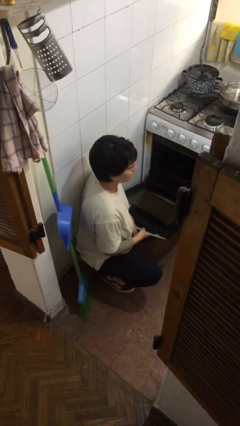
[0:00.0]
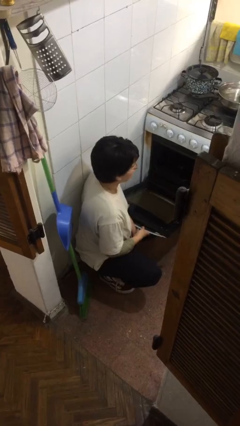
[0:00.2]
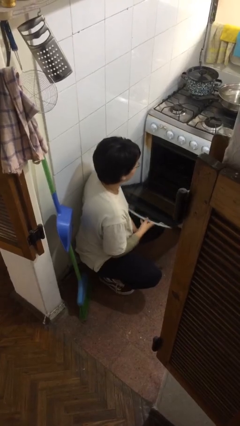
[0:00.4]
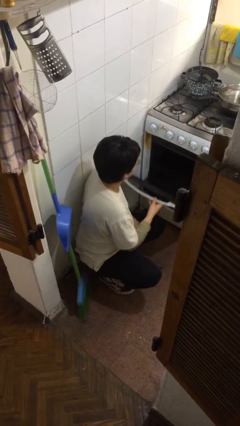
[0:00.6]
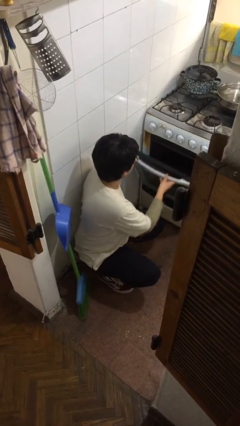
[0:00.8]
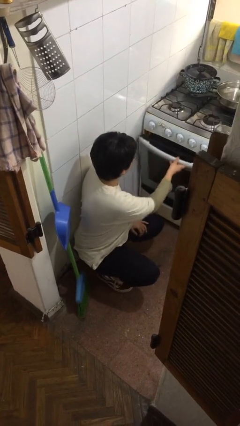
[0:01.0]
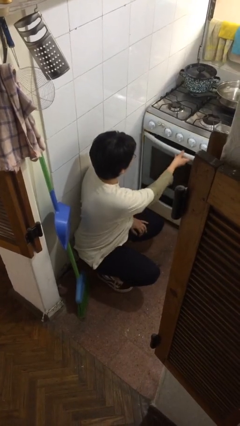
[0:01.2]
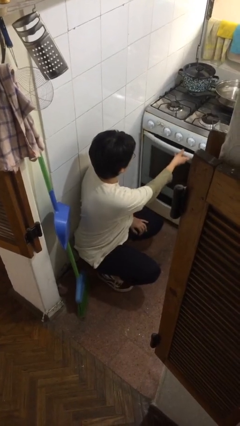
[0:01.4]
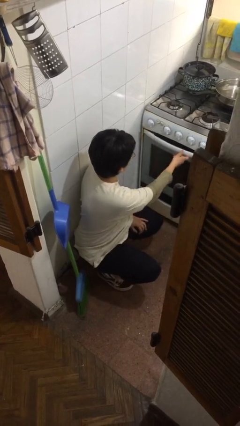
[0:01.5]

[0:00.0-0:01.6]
person closes oven door

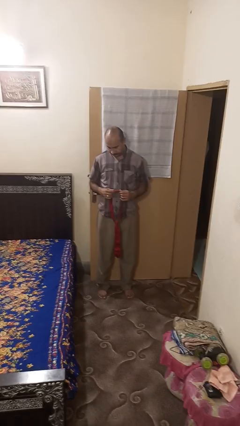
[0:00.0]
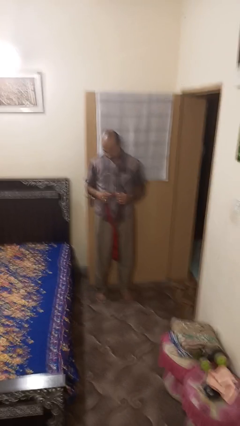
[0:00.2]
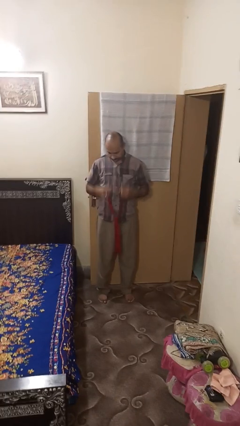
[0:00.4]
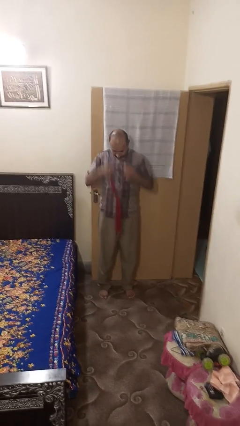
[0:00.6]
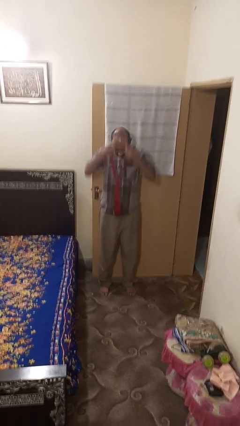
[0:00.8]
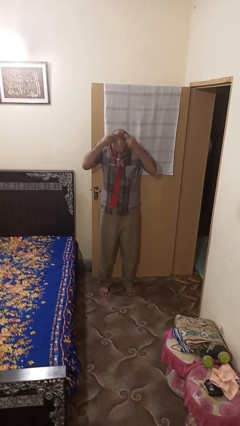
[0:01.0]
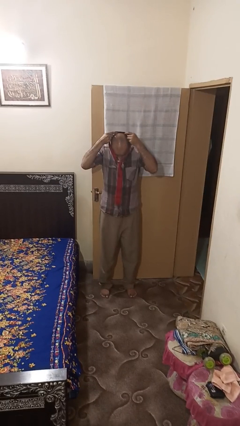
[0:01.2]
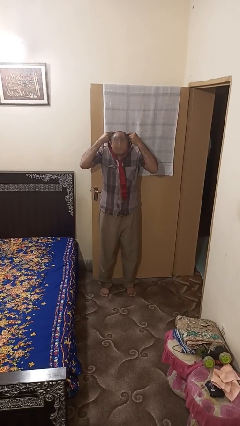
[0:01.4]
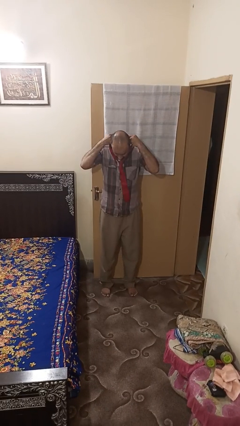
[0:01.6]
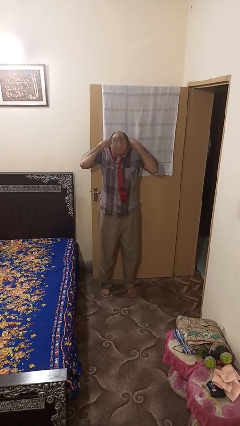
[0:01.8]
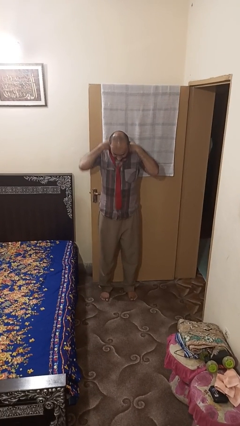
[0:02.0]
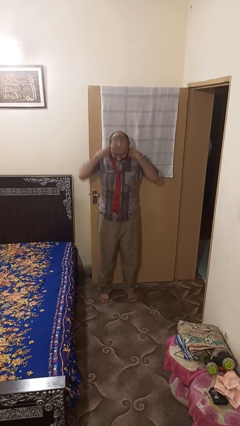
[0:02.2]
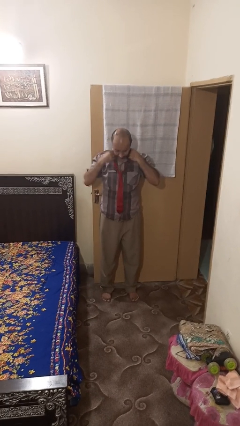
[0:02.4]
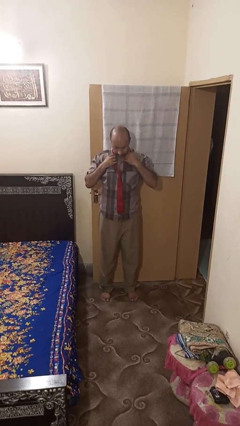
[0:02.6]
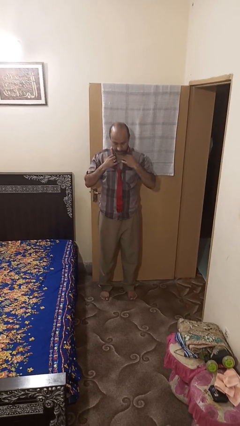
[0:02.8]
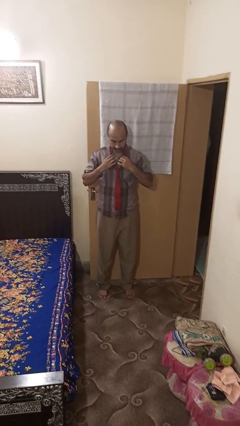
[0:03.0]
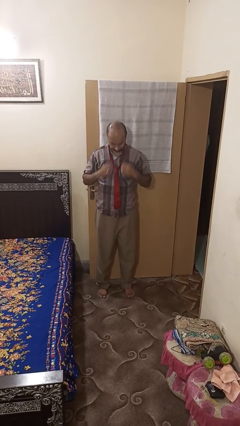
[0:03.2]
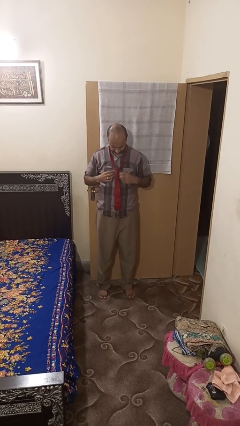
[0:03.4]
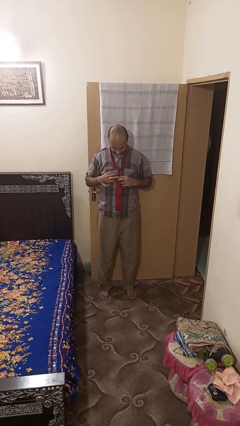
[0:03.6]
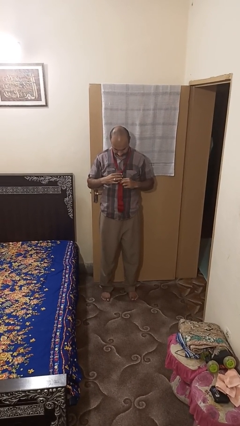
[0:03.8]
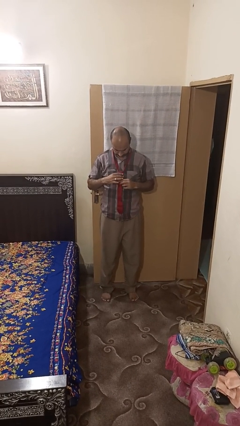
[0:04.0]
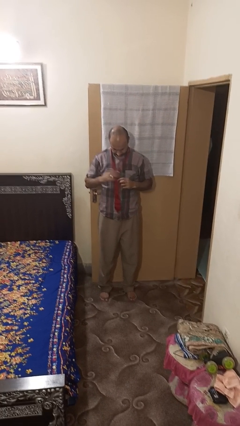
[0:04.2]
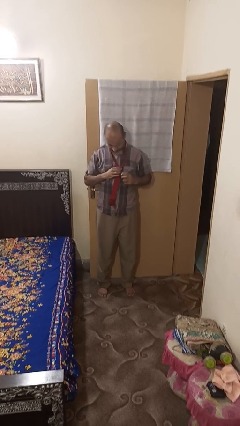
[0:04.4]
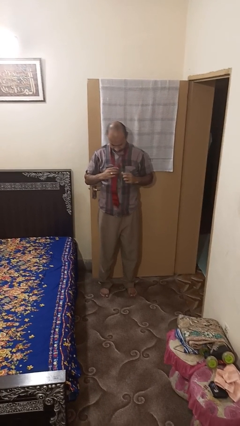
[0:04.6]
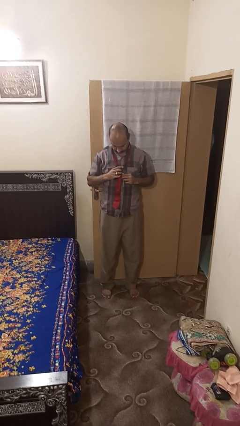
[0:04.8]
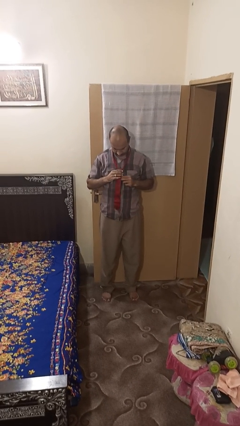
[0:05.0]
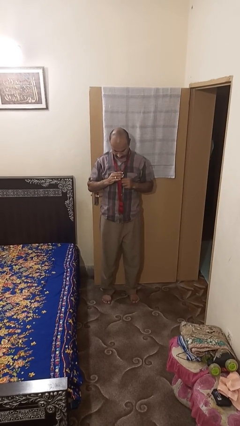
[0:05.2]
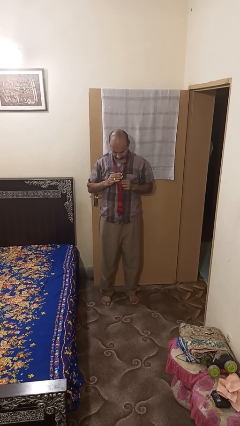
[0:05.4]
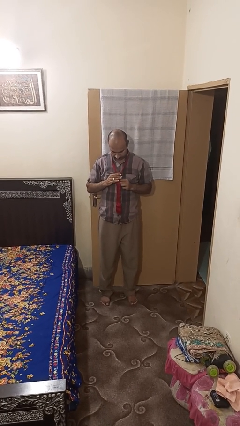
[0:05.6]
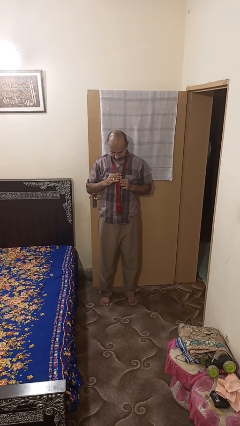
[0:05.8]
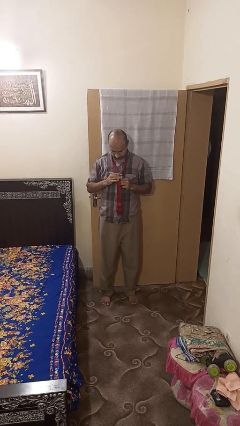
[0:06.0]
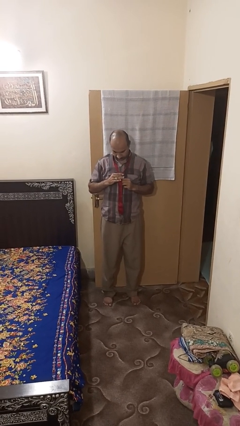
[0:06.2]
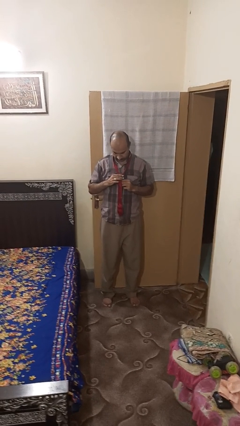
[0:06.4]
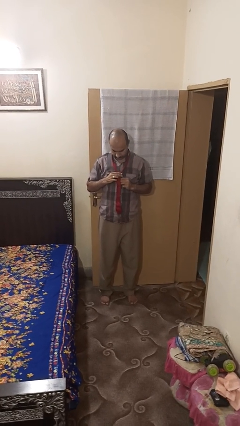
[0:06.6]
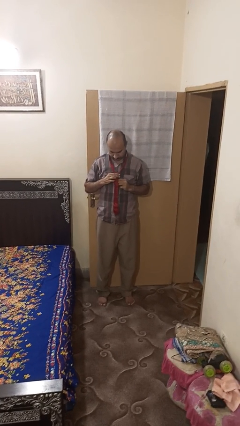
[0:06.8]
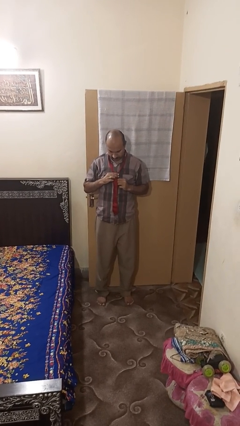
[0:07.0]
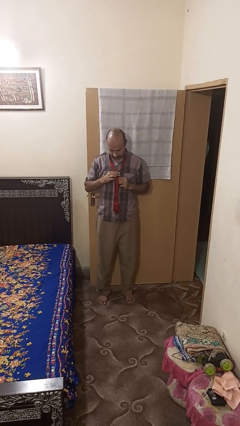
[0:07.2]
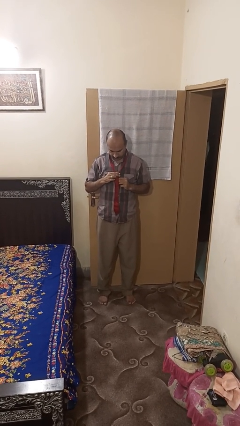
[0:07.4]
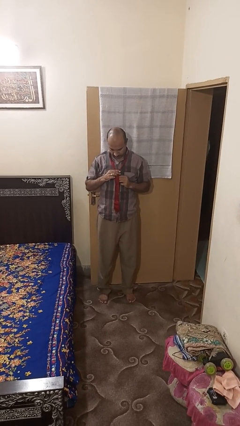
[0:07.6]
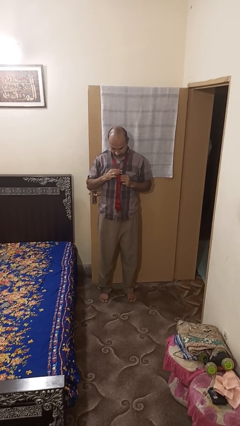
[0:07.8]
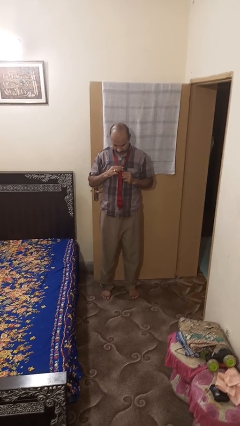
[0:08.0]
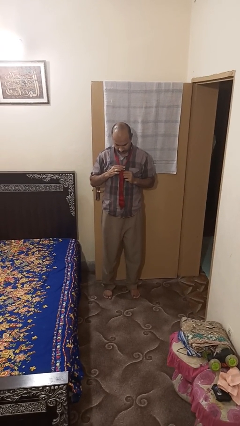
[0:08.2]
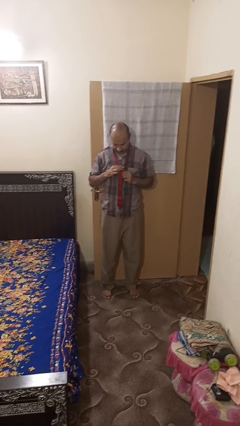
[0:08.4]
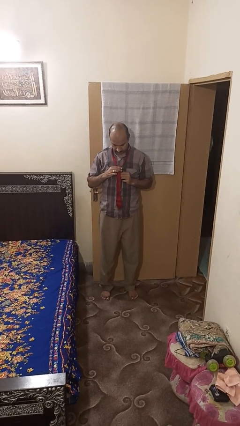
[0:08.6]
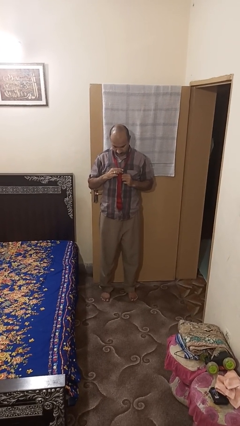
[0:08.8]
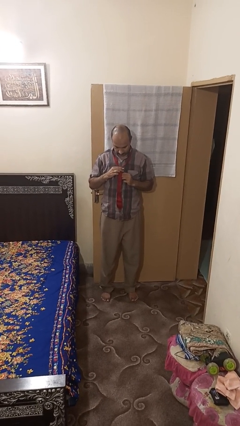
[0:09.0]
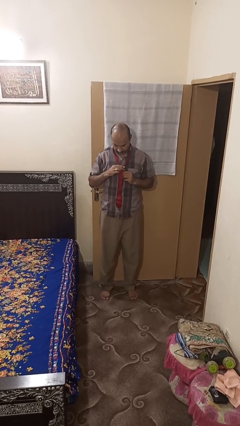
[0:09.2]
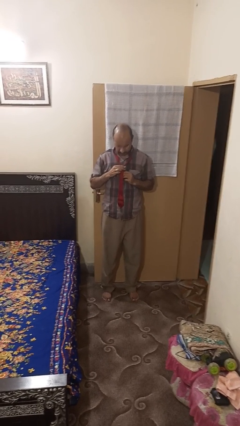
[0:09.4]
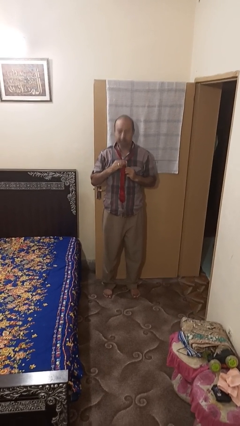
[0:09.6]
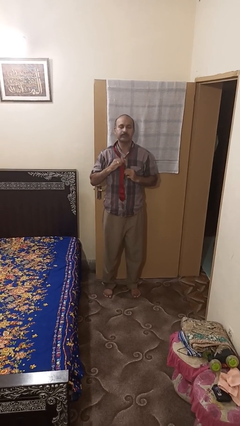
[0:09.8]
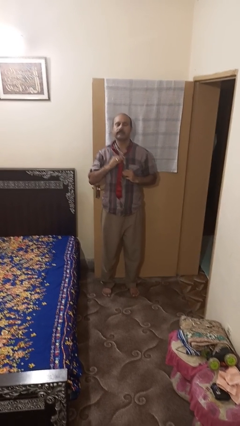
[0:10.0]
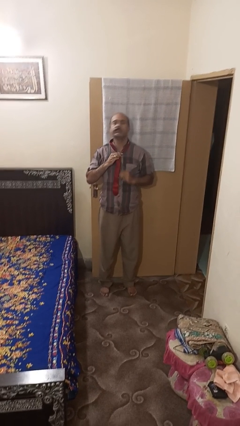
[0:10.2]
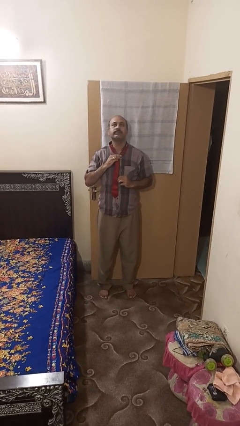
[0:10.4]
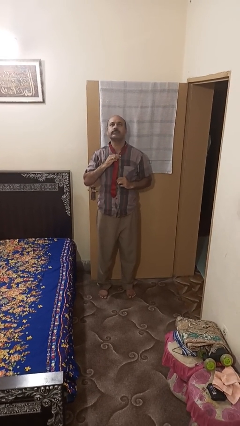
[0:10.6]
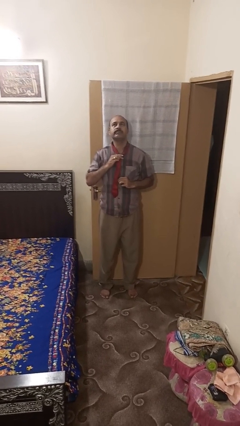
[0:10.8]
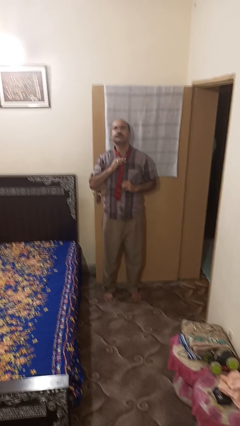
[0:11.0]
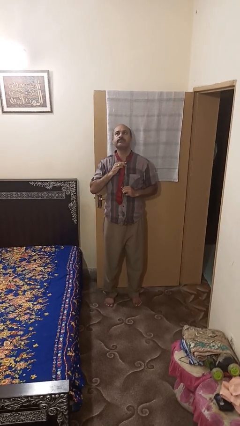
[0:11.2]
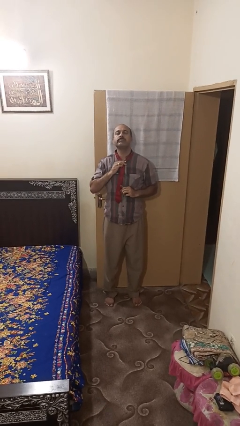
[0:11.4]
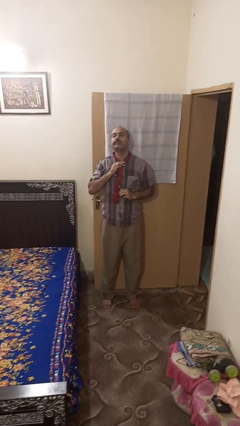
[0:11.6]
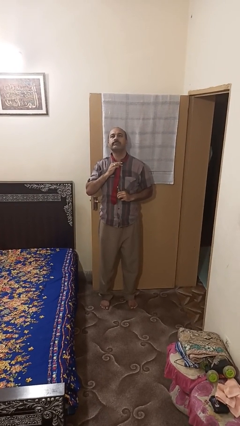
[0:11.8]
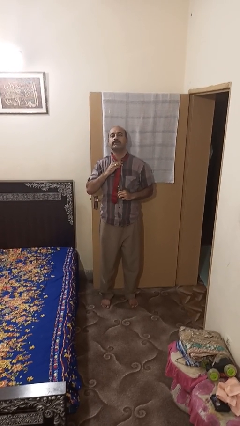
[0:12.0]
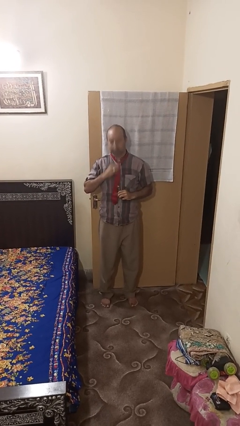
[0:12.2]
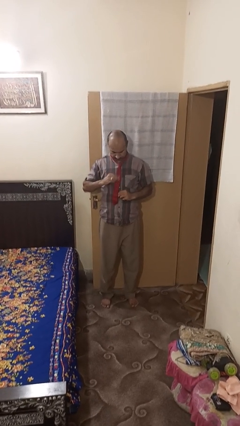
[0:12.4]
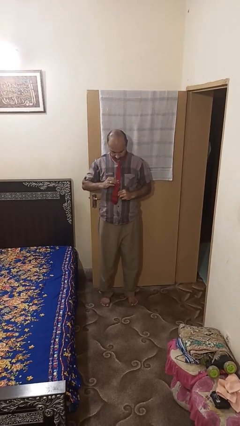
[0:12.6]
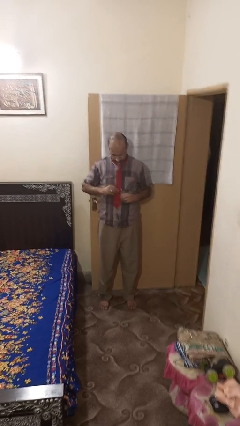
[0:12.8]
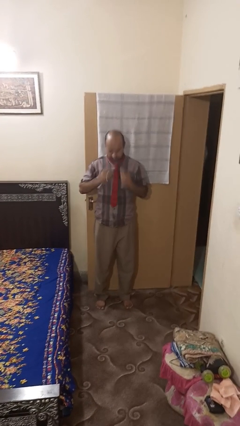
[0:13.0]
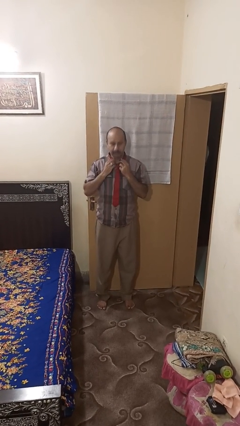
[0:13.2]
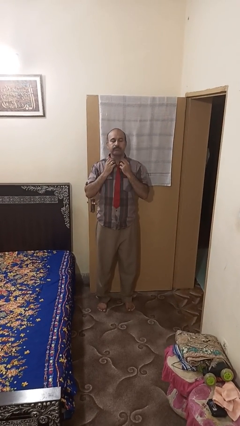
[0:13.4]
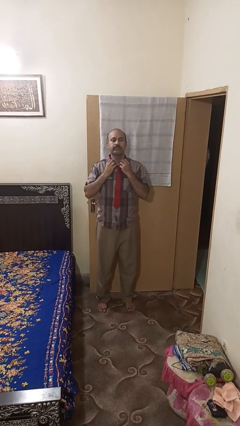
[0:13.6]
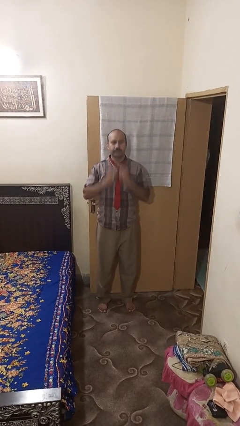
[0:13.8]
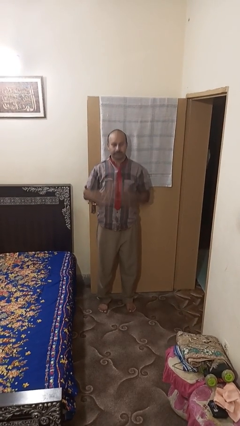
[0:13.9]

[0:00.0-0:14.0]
person puts on necktie

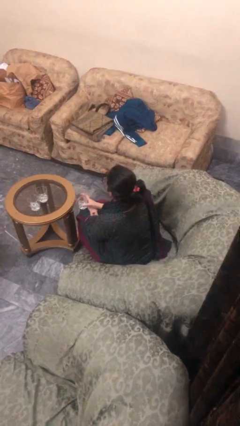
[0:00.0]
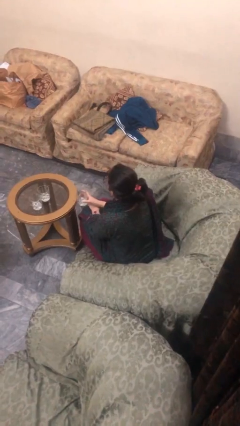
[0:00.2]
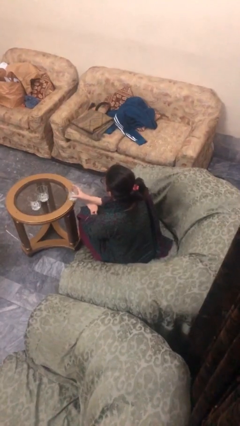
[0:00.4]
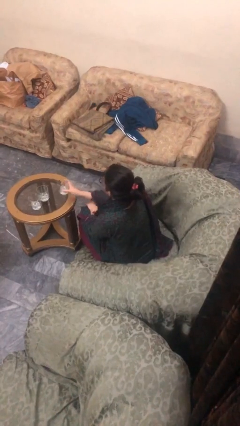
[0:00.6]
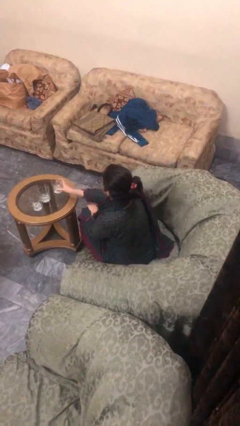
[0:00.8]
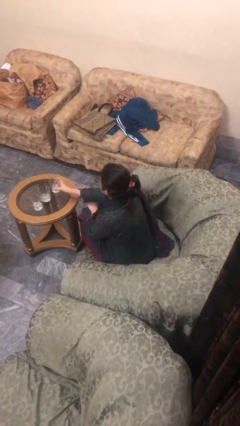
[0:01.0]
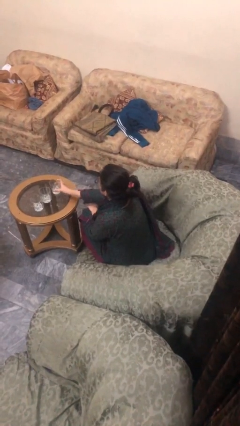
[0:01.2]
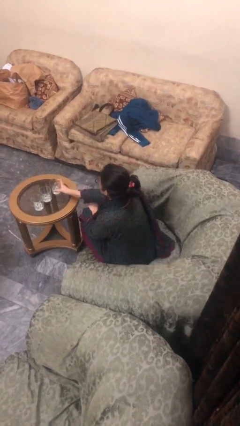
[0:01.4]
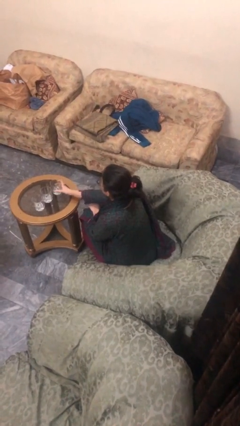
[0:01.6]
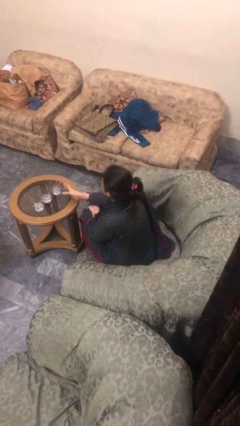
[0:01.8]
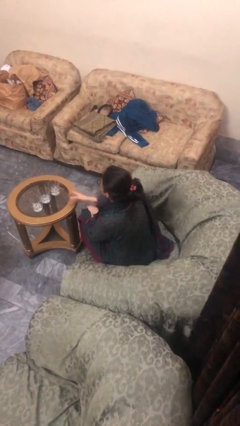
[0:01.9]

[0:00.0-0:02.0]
person puts down object on table

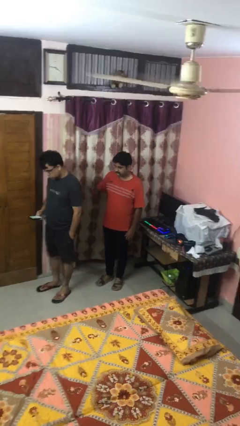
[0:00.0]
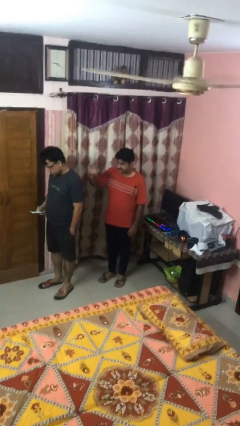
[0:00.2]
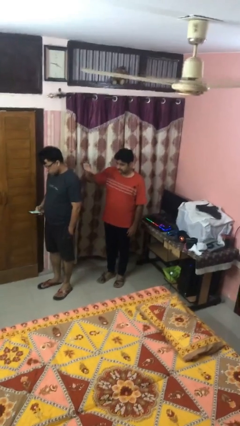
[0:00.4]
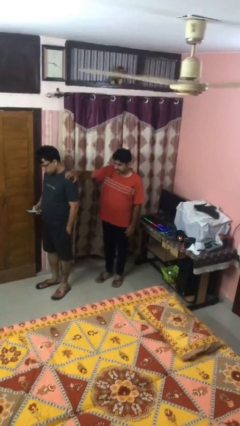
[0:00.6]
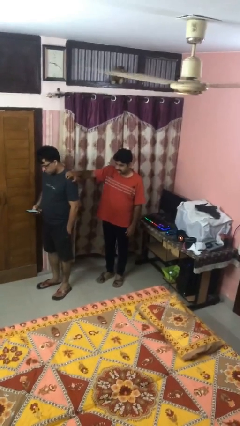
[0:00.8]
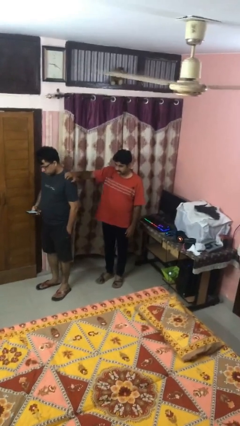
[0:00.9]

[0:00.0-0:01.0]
person grabs person by shoulder
